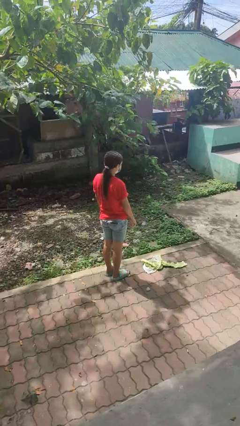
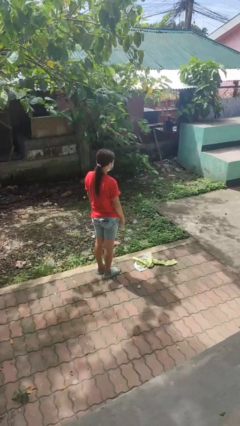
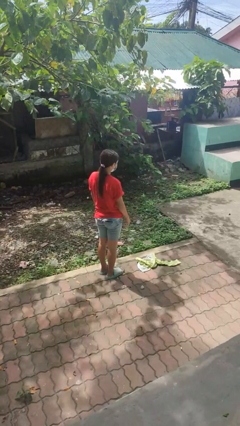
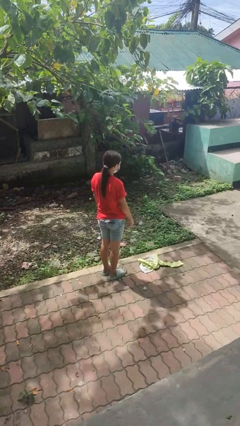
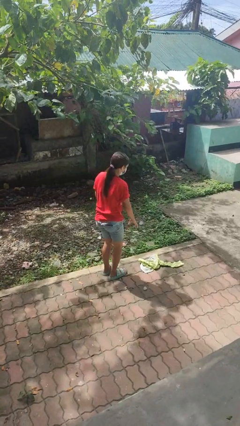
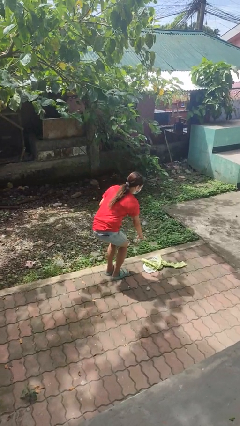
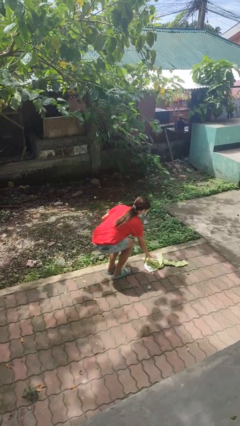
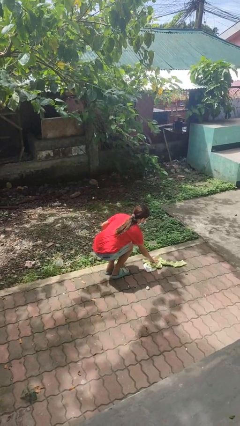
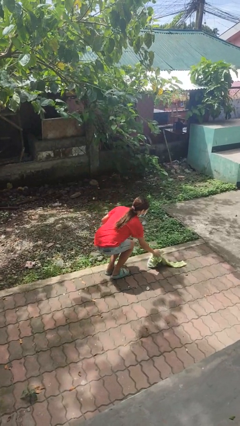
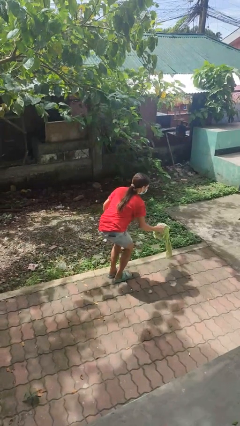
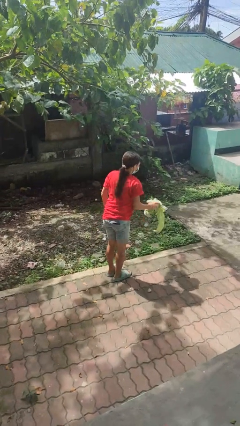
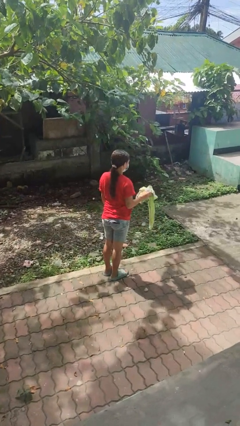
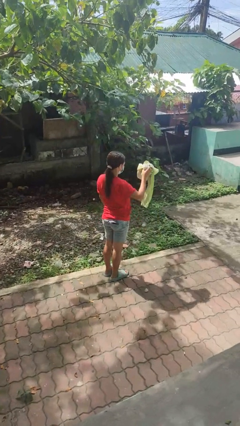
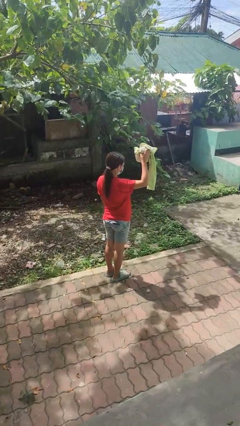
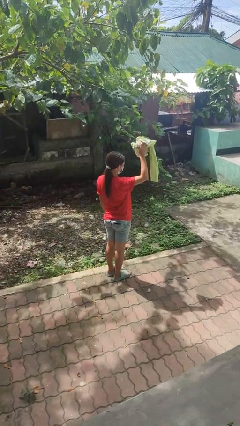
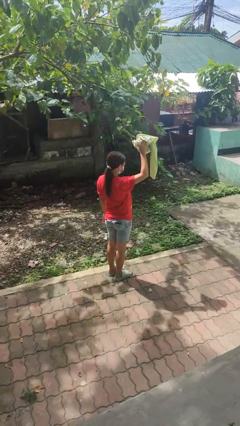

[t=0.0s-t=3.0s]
person picks up object from floor

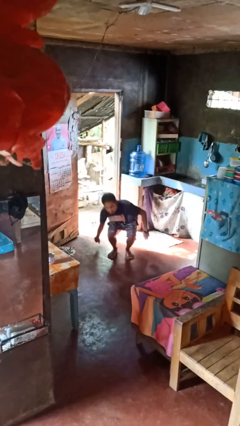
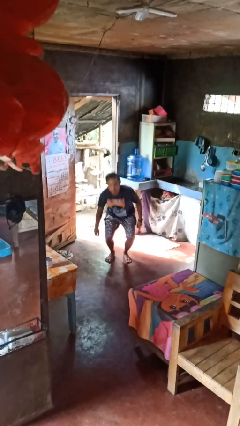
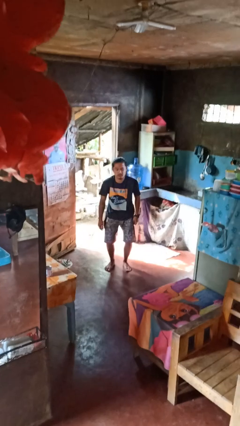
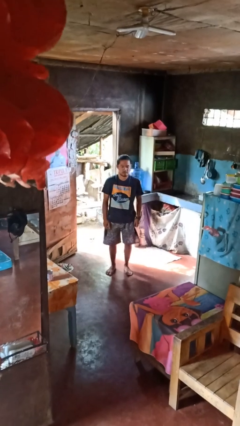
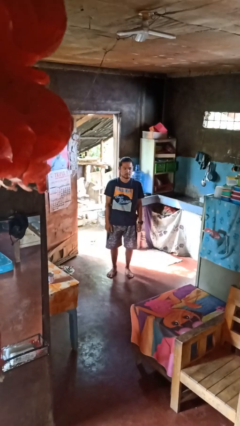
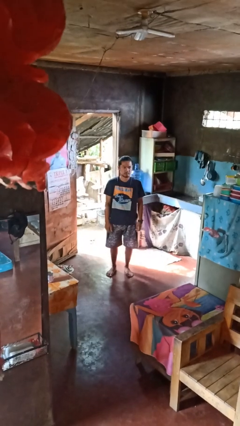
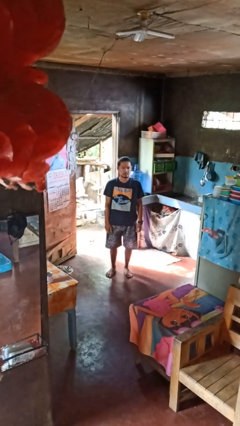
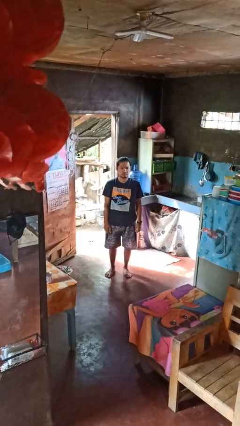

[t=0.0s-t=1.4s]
person stands up from floor

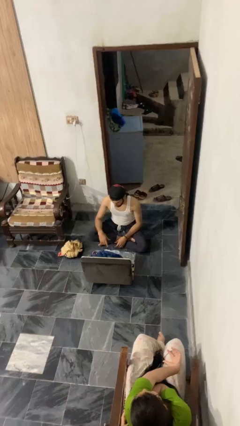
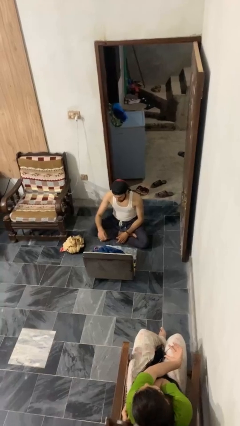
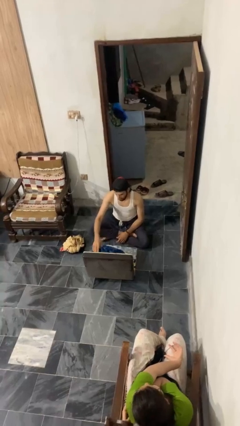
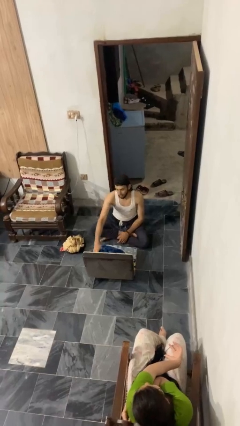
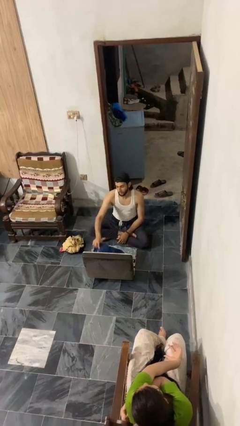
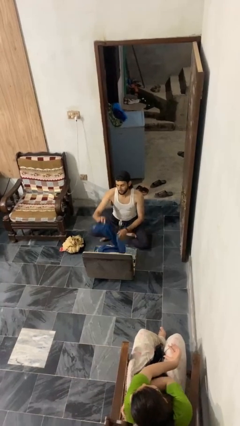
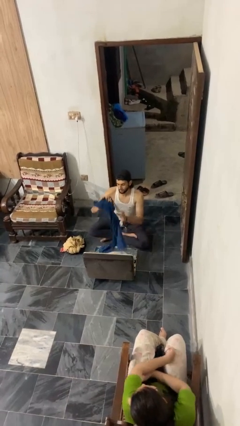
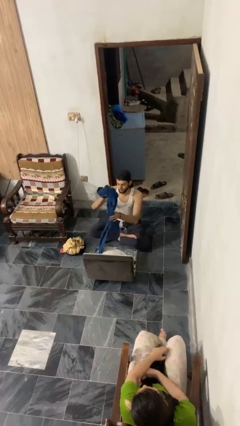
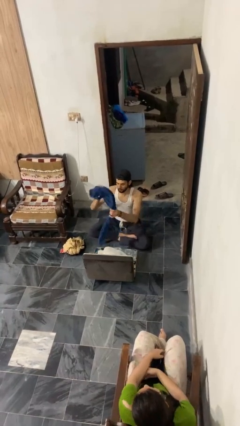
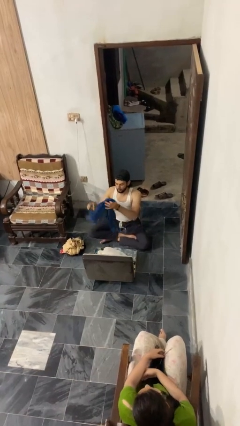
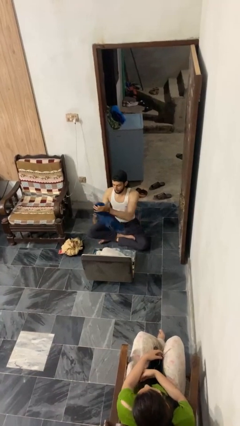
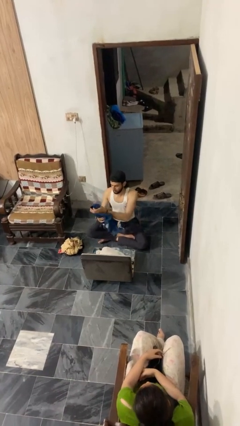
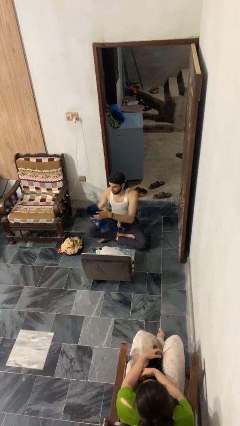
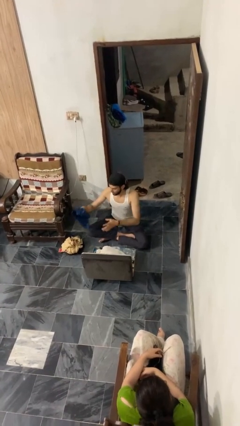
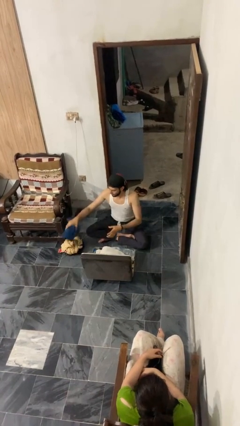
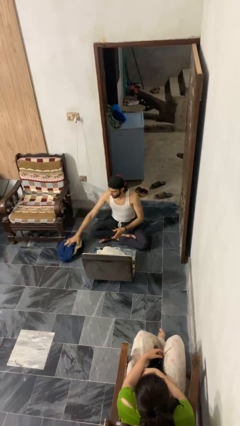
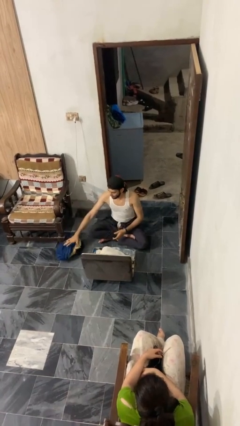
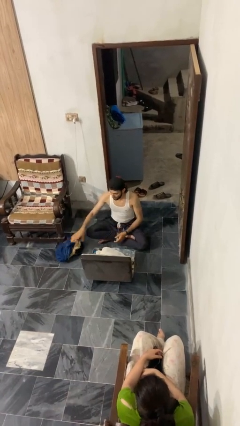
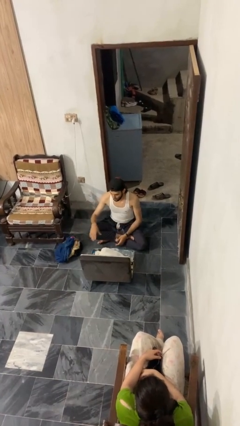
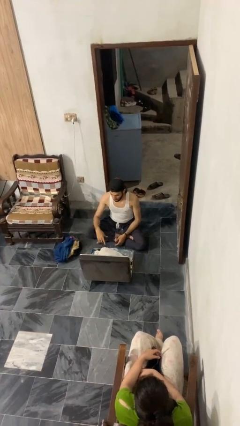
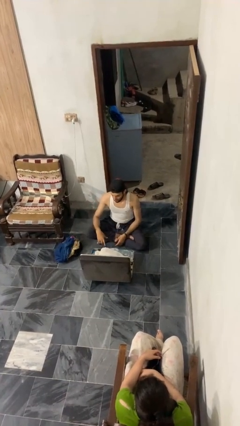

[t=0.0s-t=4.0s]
person unloads clothes from suitcase

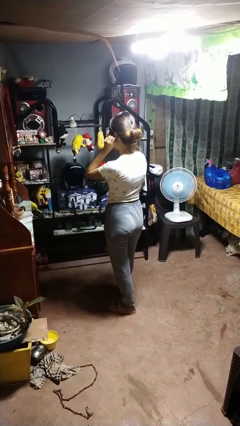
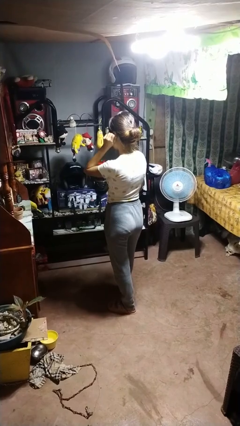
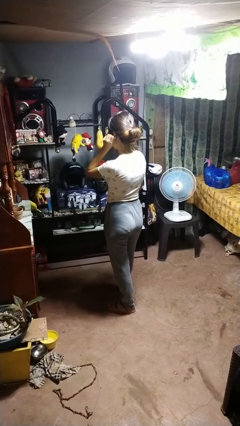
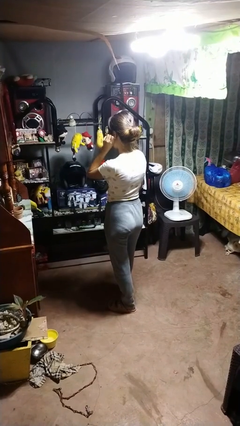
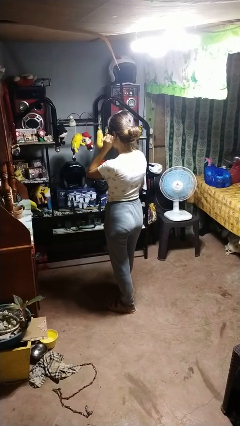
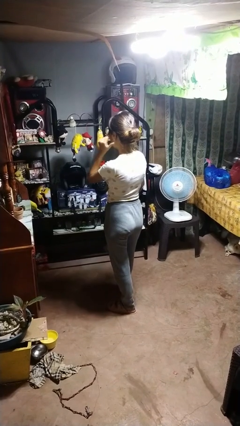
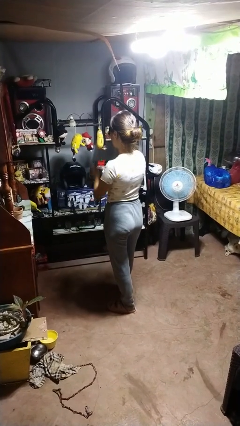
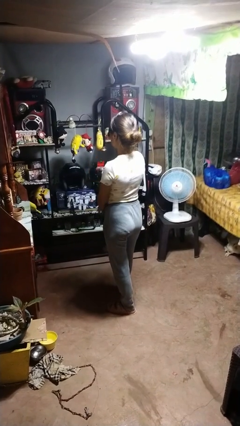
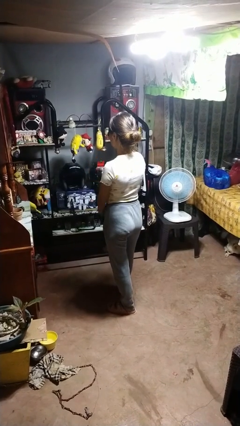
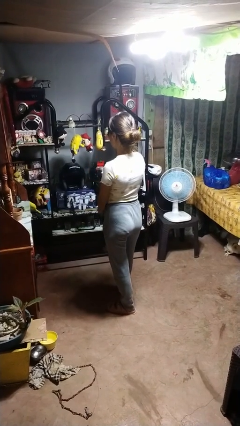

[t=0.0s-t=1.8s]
person touches earlobe

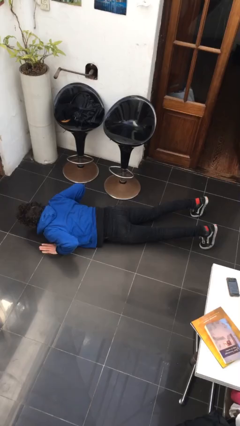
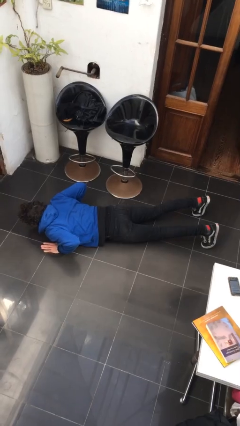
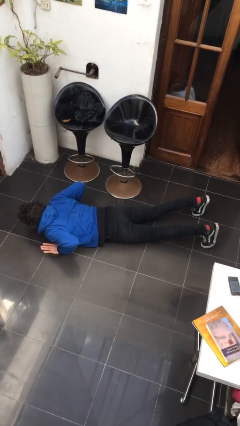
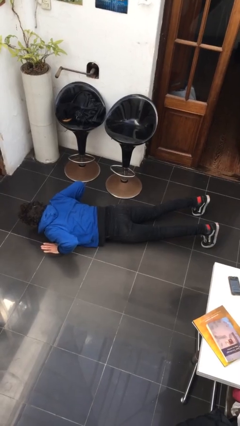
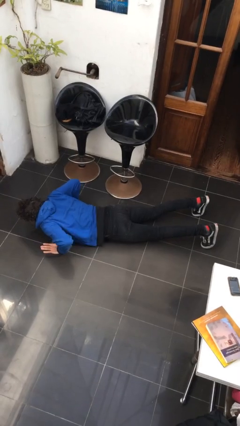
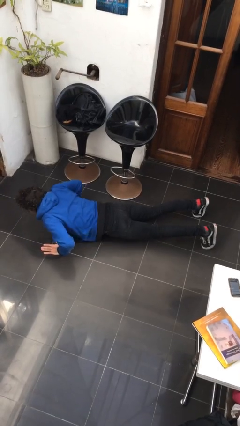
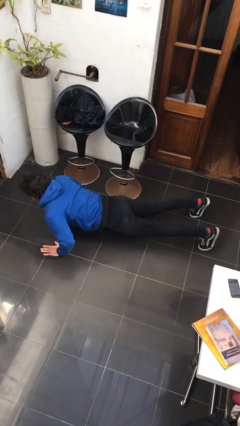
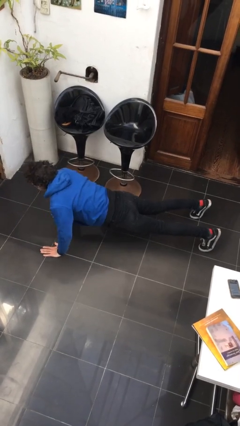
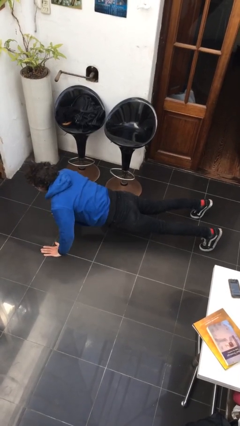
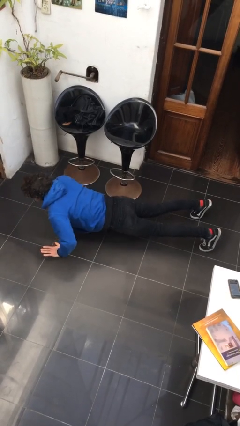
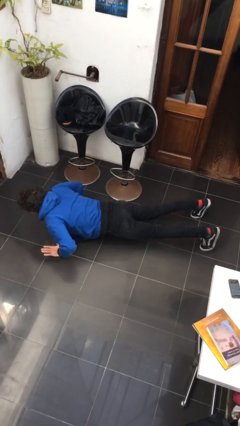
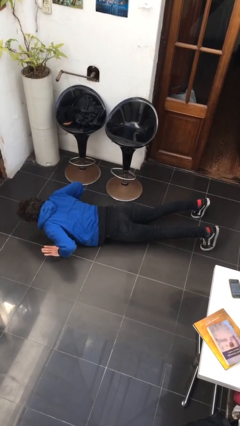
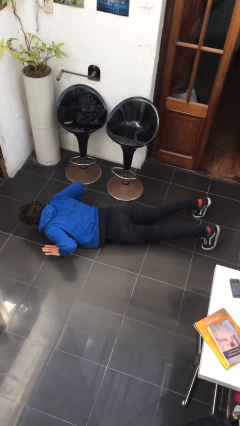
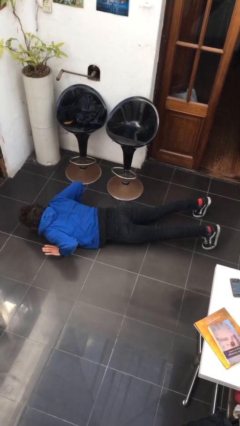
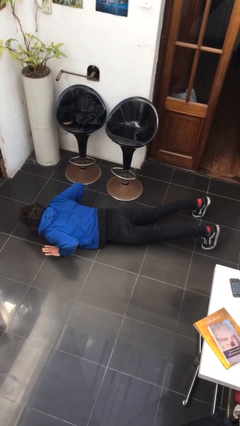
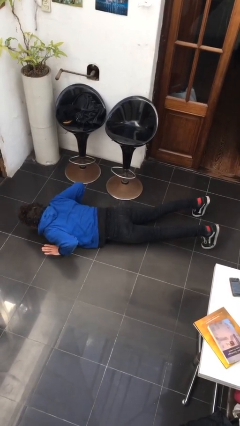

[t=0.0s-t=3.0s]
person exercises with pushup

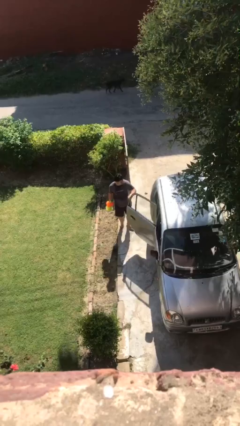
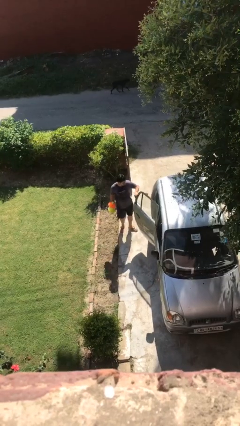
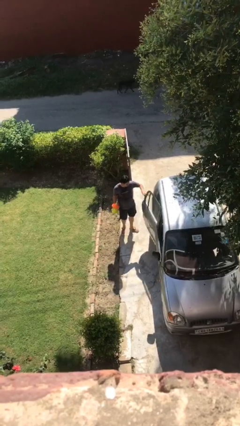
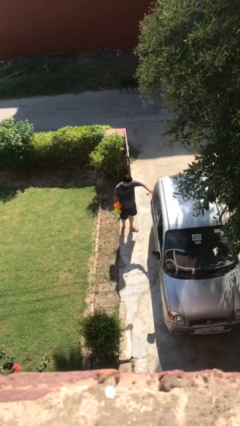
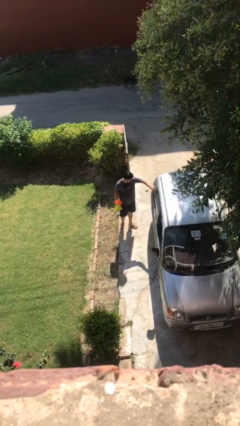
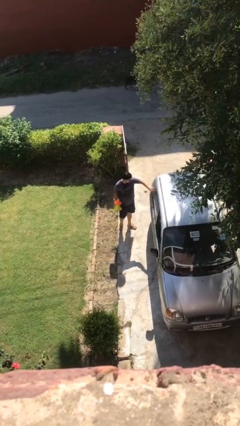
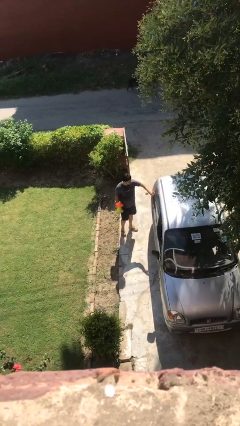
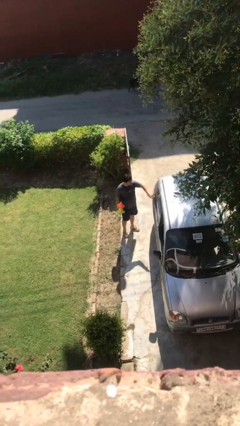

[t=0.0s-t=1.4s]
person closes car door

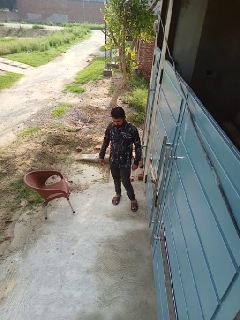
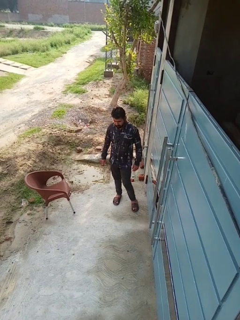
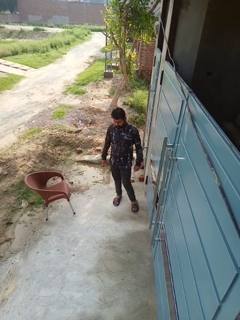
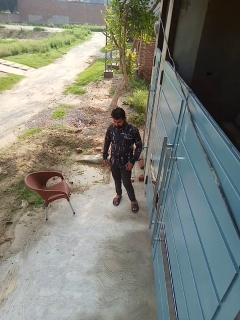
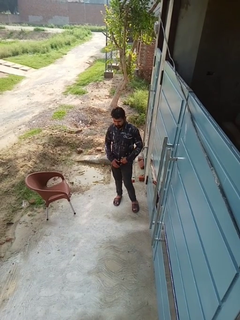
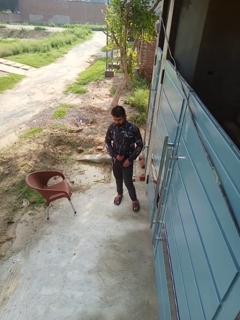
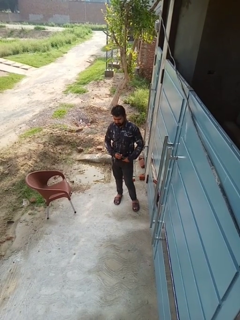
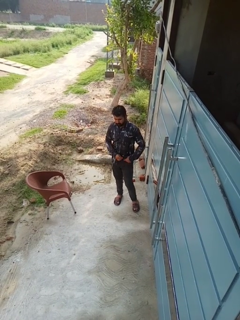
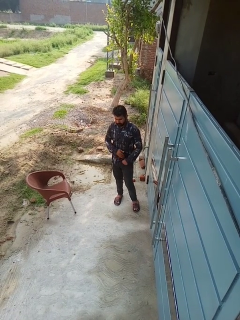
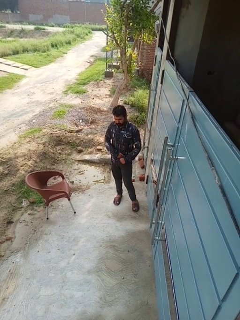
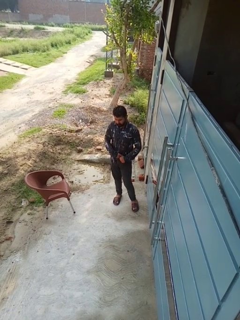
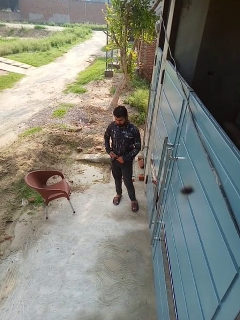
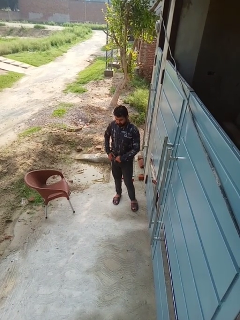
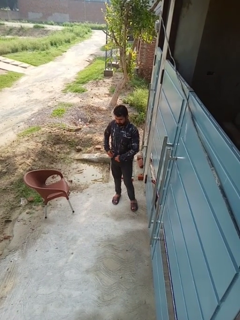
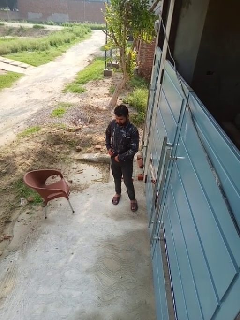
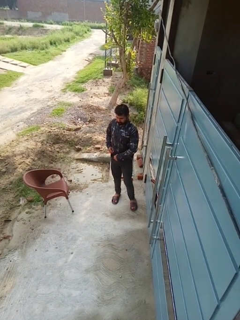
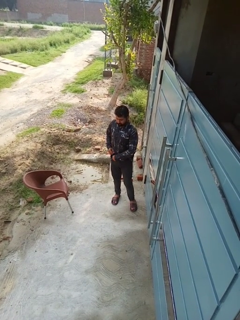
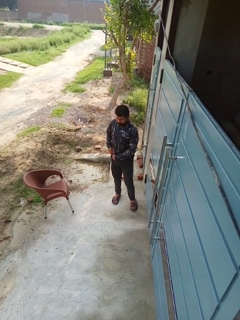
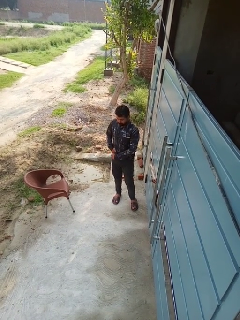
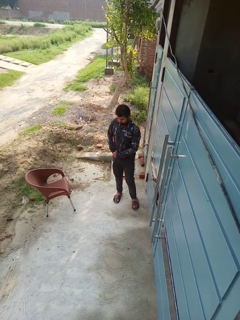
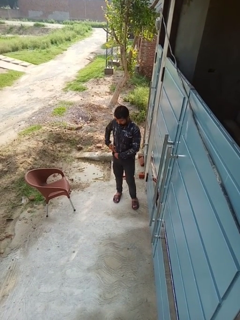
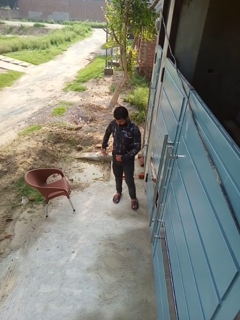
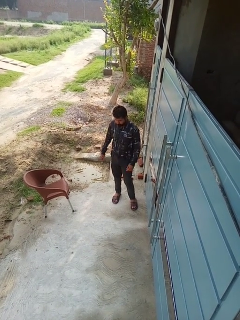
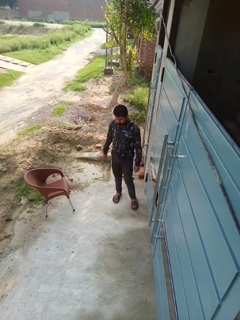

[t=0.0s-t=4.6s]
person tucks in shirt
